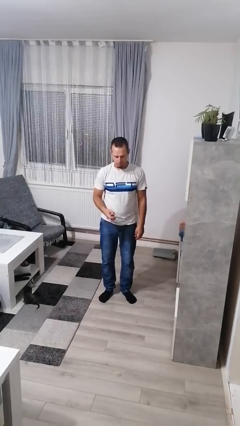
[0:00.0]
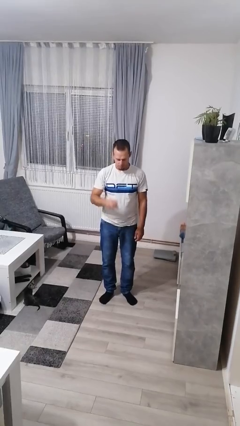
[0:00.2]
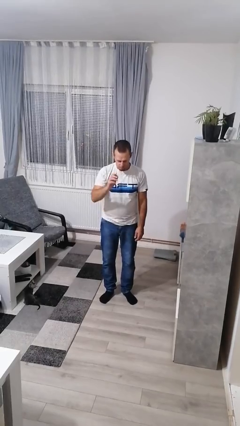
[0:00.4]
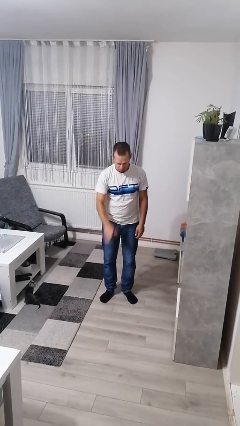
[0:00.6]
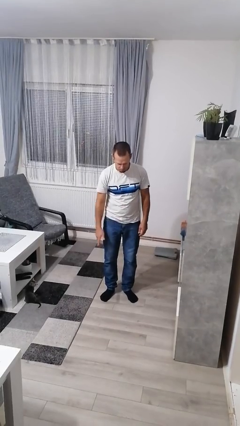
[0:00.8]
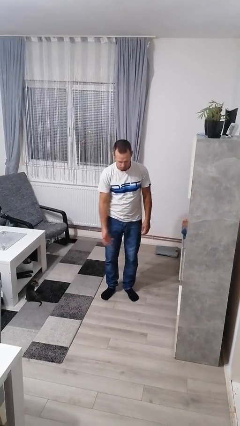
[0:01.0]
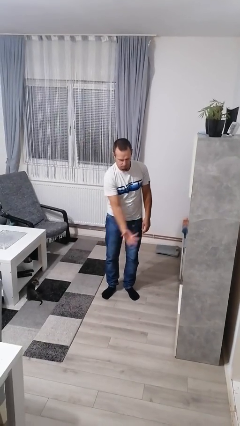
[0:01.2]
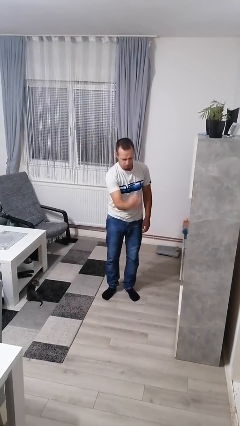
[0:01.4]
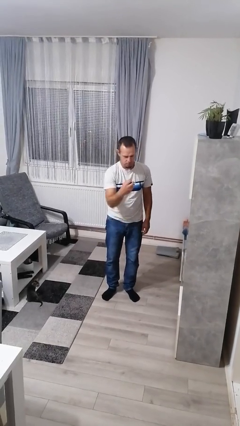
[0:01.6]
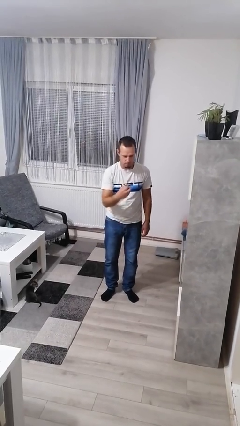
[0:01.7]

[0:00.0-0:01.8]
person bounces ball on floor

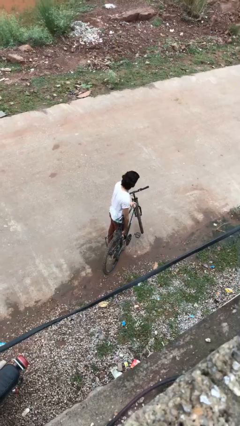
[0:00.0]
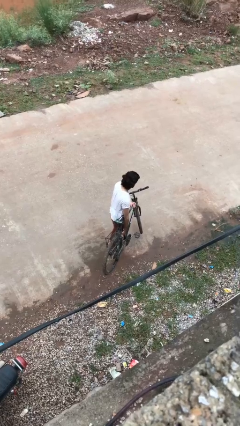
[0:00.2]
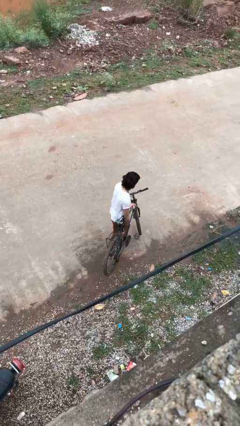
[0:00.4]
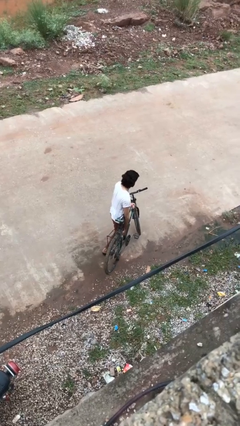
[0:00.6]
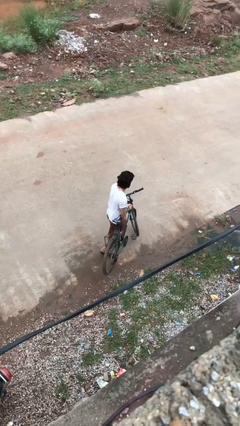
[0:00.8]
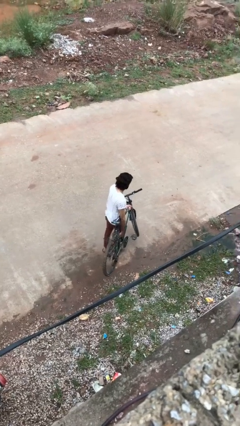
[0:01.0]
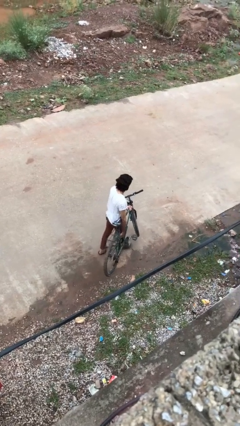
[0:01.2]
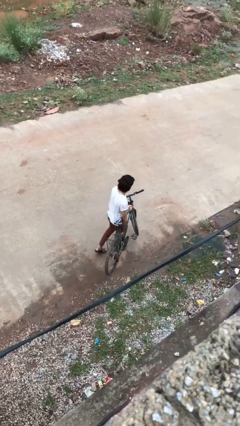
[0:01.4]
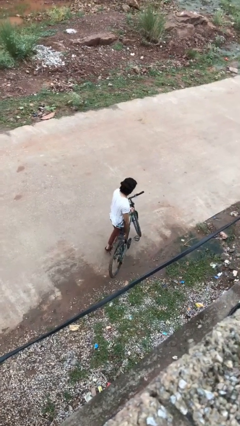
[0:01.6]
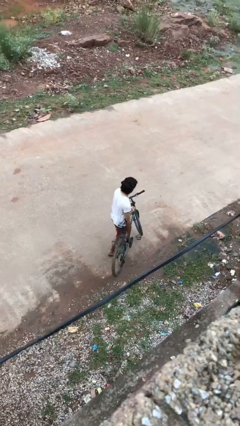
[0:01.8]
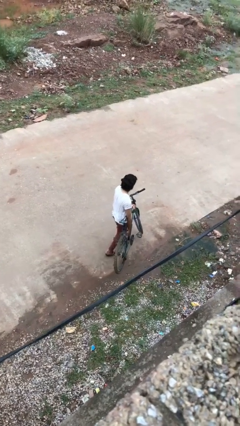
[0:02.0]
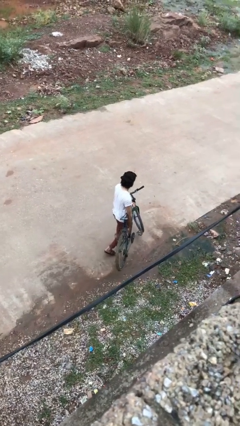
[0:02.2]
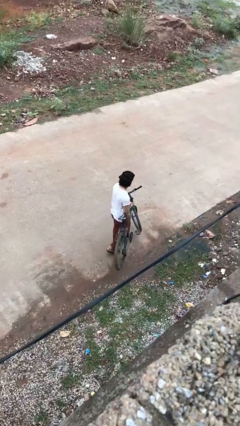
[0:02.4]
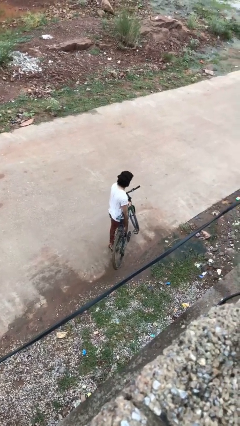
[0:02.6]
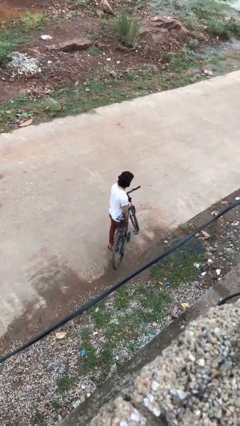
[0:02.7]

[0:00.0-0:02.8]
person carries bicycle

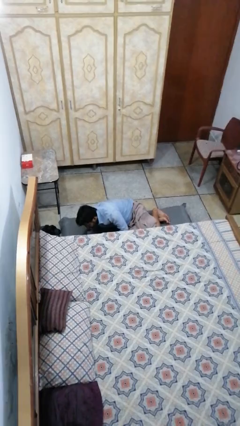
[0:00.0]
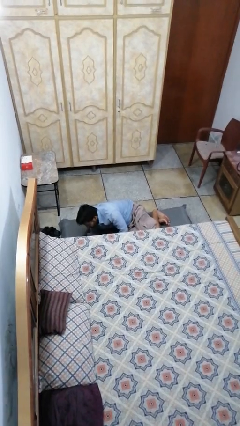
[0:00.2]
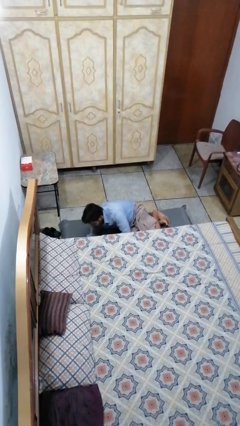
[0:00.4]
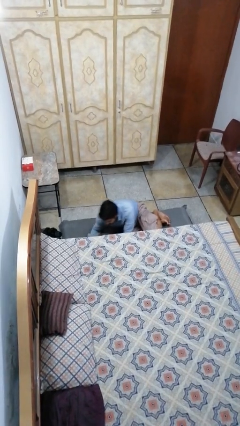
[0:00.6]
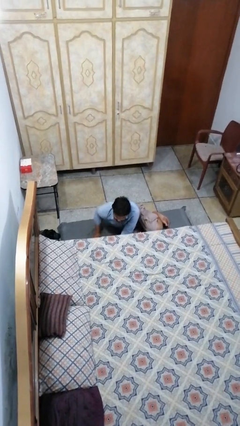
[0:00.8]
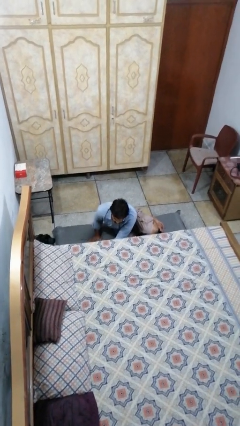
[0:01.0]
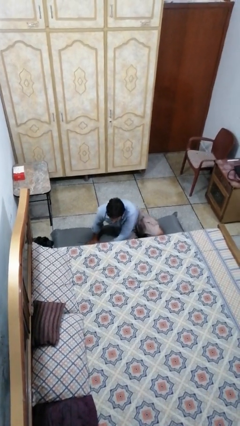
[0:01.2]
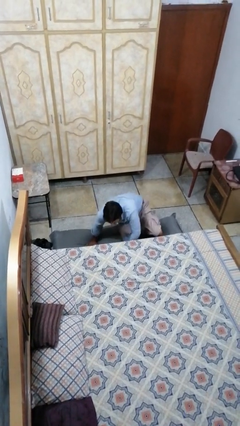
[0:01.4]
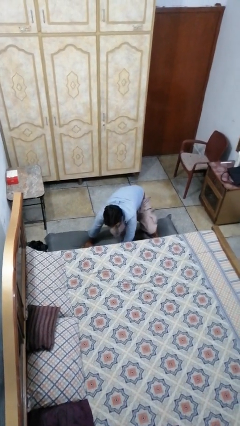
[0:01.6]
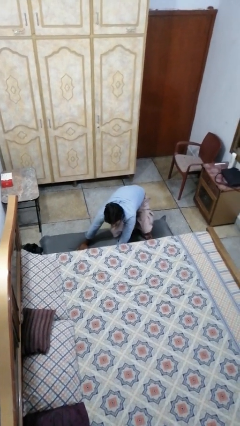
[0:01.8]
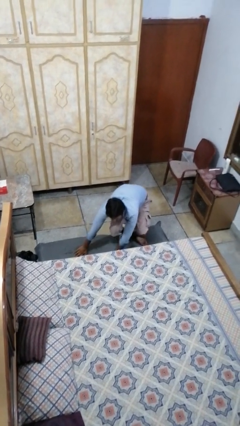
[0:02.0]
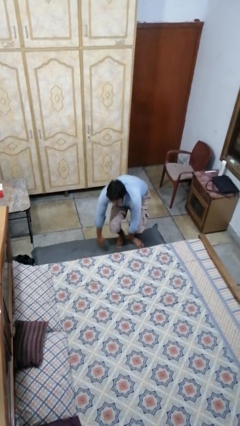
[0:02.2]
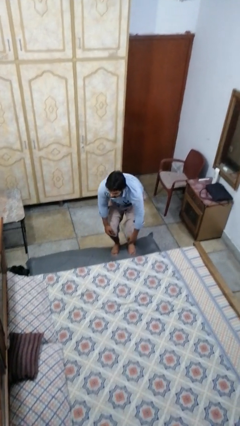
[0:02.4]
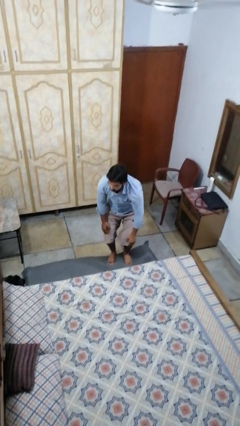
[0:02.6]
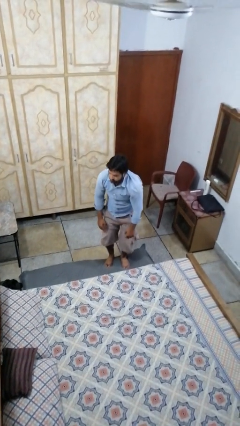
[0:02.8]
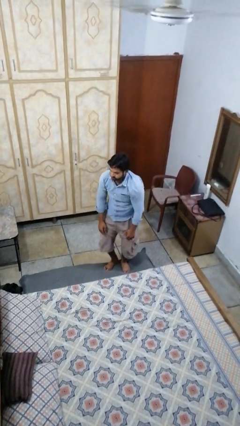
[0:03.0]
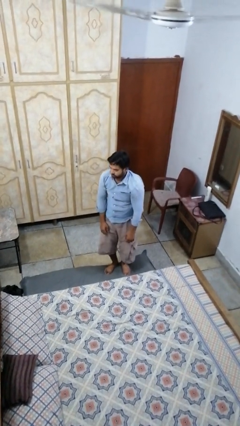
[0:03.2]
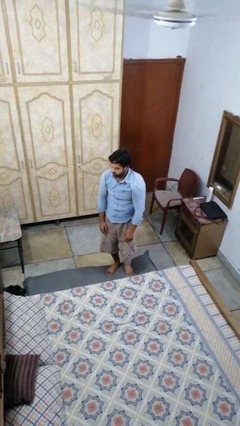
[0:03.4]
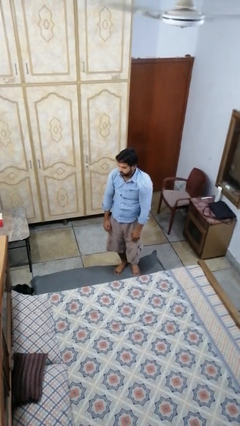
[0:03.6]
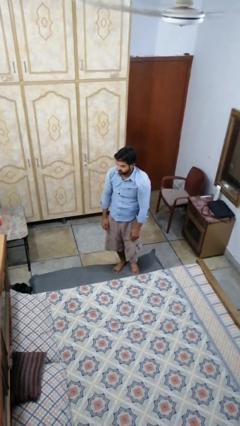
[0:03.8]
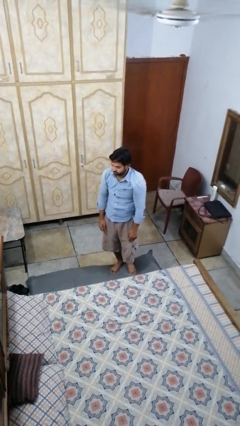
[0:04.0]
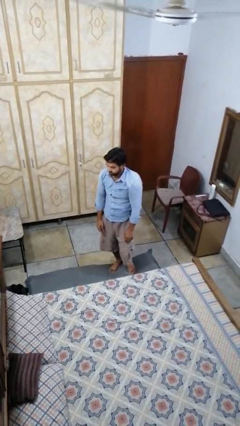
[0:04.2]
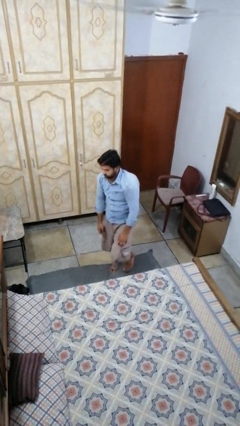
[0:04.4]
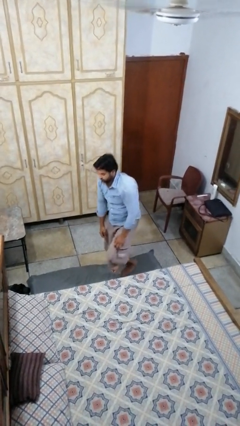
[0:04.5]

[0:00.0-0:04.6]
person stands up from floor

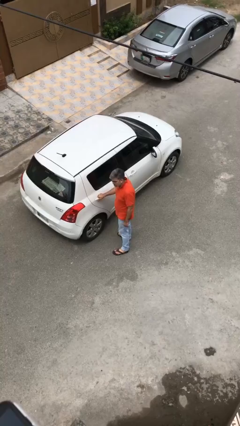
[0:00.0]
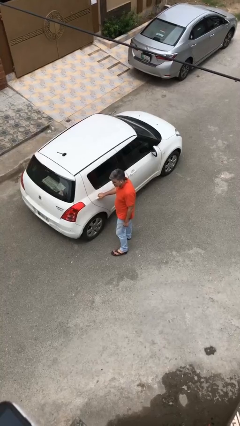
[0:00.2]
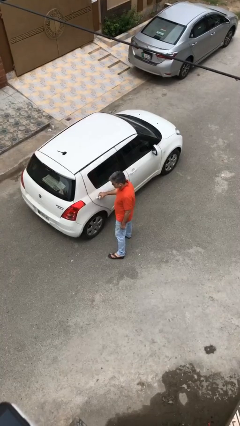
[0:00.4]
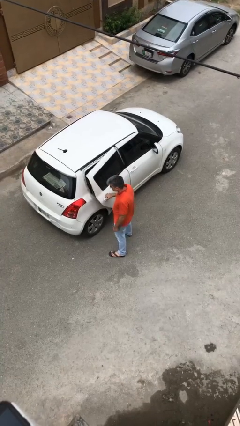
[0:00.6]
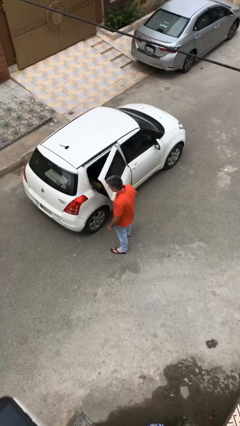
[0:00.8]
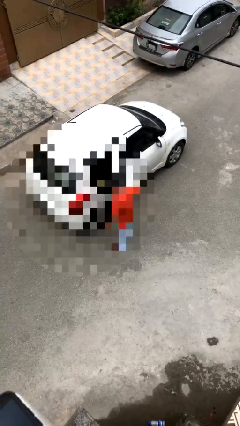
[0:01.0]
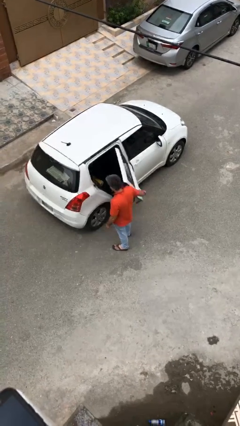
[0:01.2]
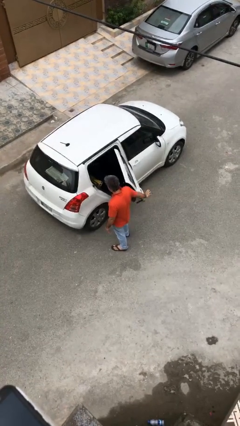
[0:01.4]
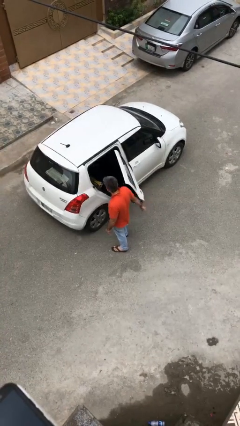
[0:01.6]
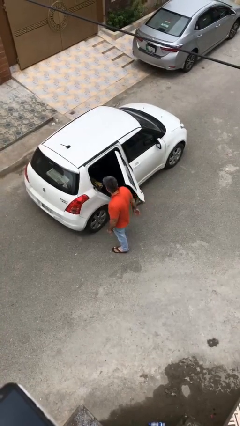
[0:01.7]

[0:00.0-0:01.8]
person opens car door

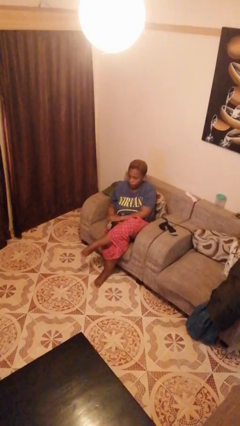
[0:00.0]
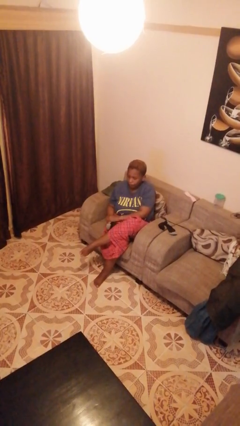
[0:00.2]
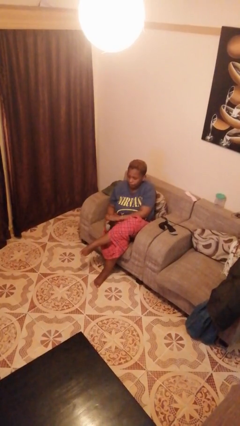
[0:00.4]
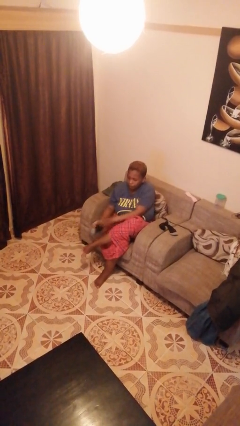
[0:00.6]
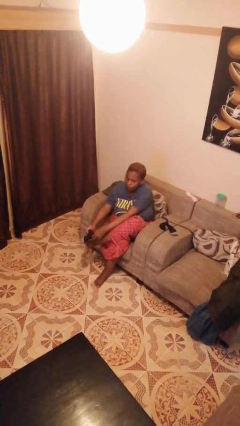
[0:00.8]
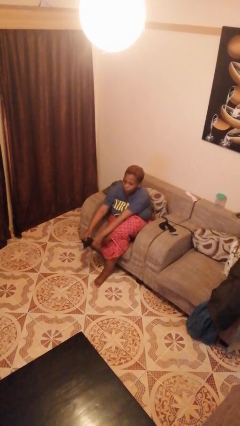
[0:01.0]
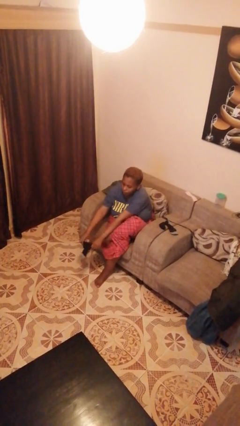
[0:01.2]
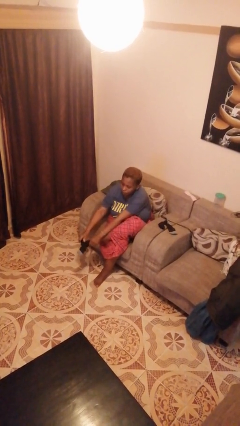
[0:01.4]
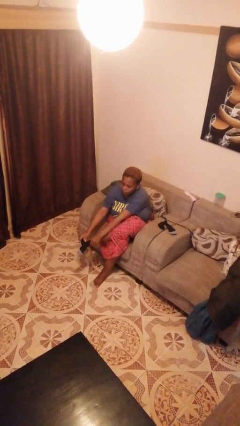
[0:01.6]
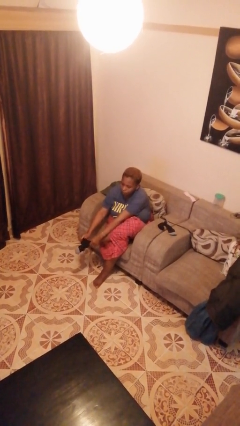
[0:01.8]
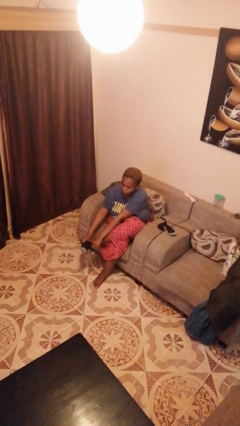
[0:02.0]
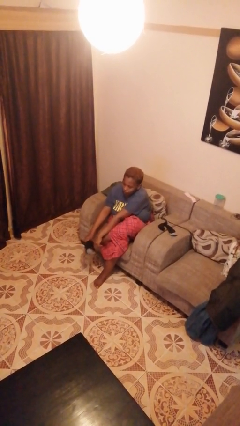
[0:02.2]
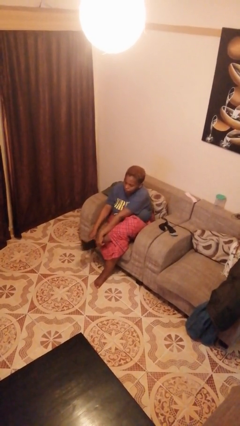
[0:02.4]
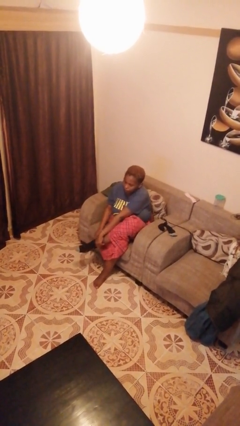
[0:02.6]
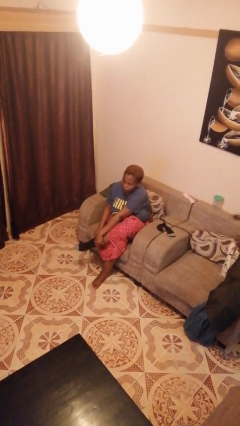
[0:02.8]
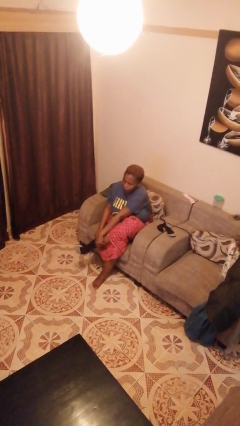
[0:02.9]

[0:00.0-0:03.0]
person puts on socks

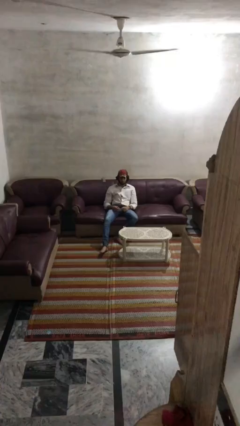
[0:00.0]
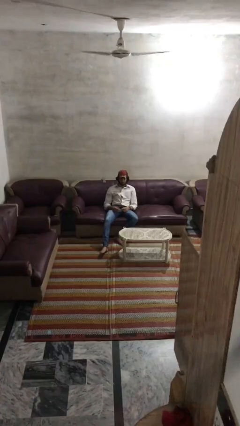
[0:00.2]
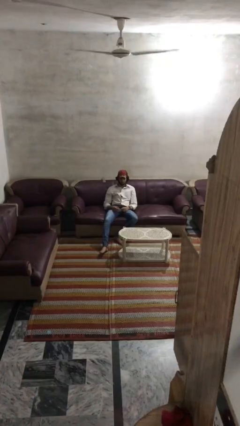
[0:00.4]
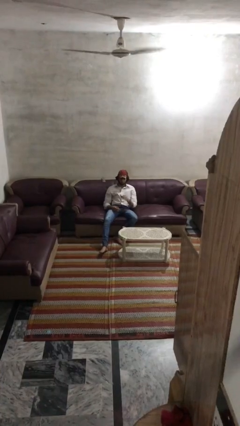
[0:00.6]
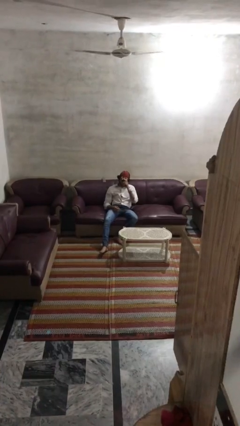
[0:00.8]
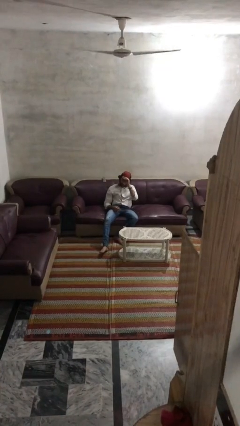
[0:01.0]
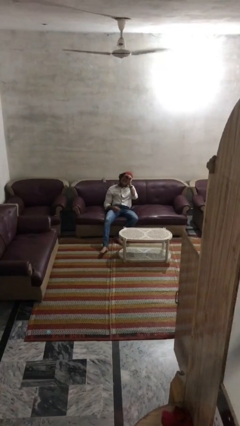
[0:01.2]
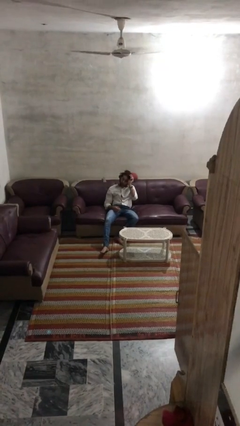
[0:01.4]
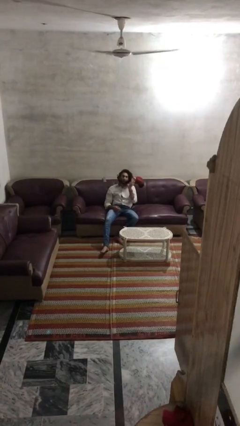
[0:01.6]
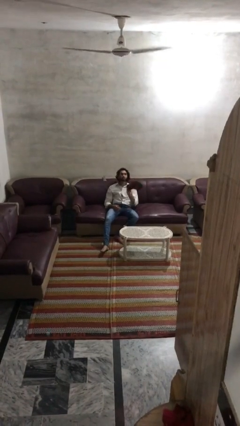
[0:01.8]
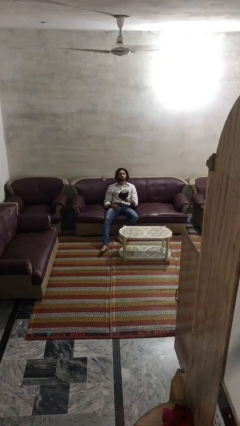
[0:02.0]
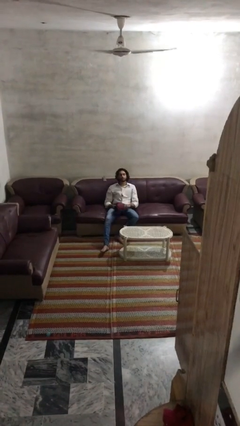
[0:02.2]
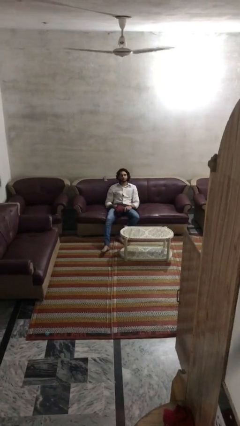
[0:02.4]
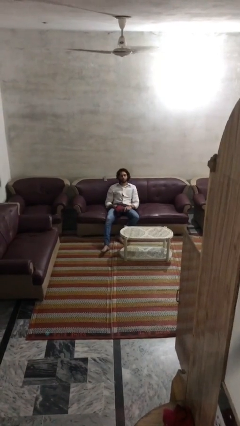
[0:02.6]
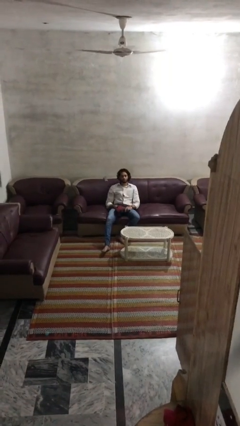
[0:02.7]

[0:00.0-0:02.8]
person takes off hat

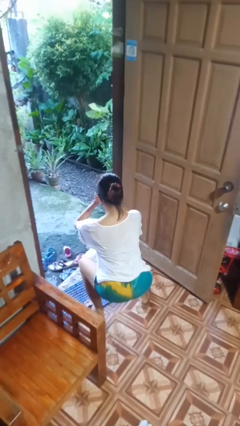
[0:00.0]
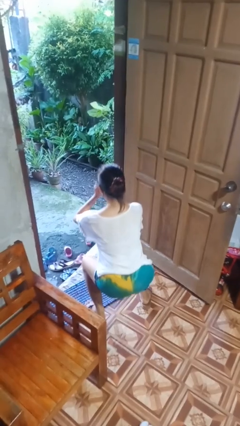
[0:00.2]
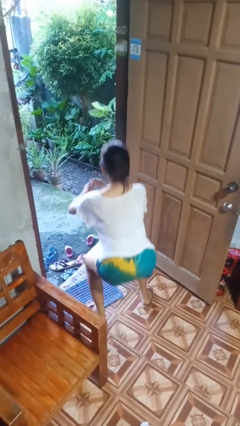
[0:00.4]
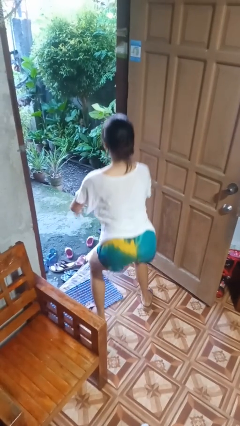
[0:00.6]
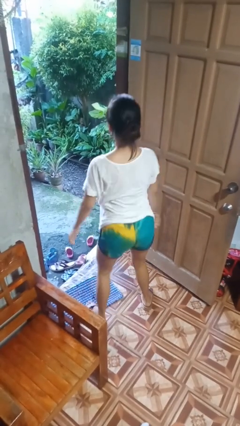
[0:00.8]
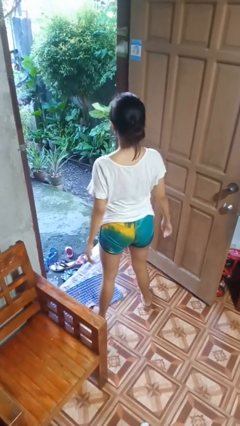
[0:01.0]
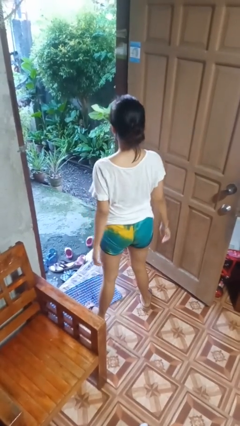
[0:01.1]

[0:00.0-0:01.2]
person stands up
